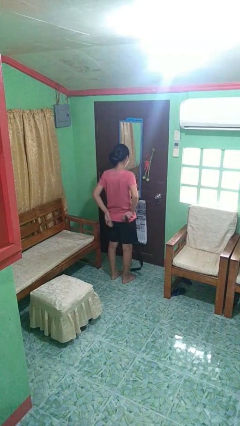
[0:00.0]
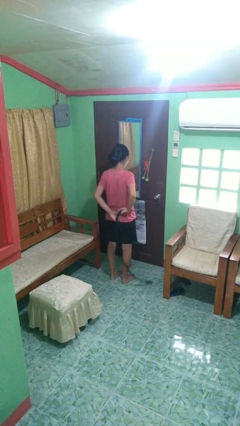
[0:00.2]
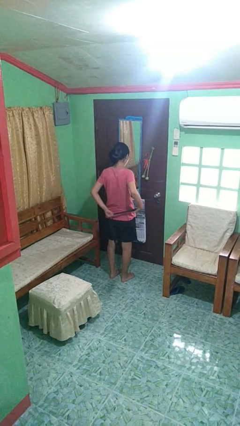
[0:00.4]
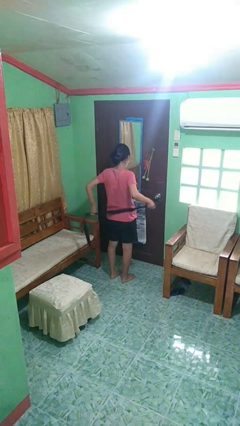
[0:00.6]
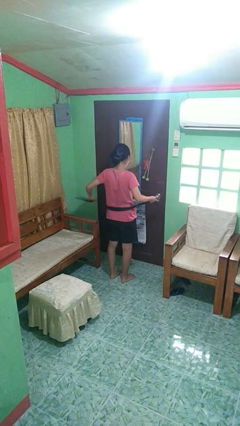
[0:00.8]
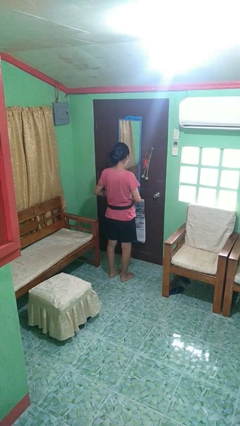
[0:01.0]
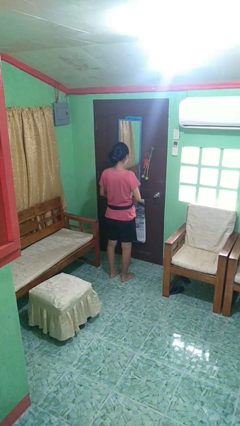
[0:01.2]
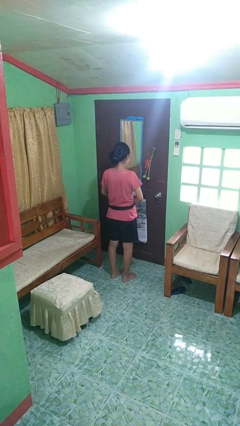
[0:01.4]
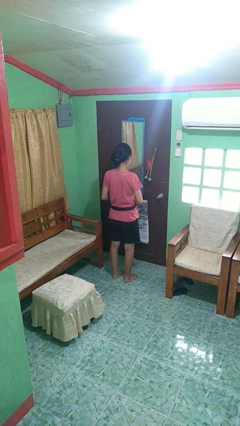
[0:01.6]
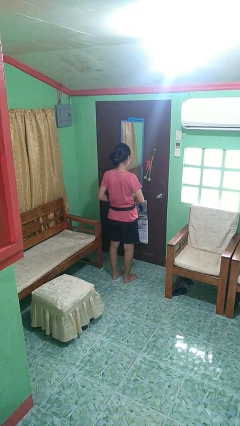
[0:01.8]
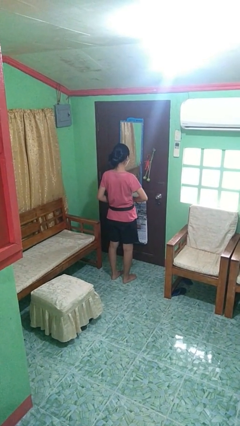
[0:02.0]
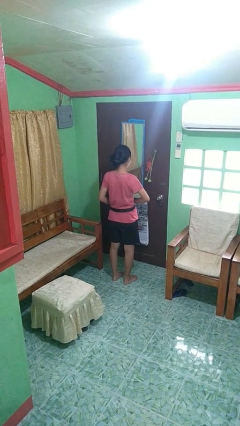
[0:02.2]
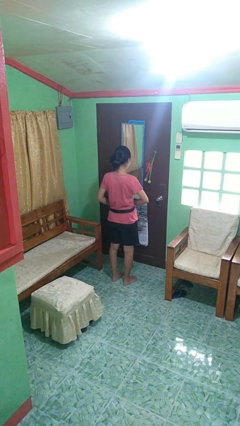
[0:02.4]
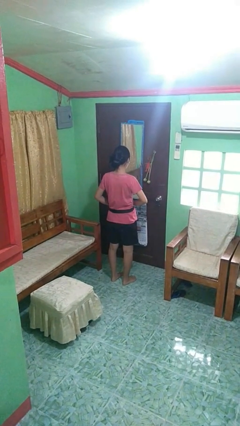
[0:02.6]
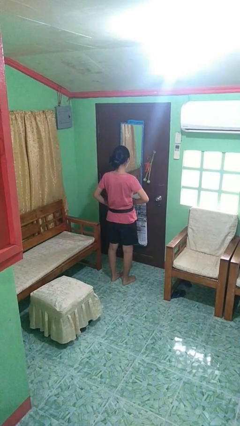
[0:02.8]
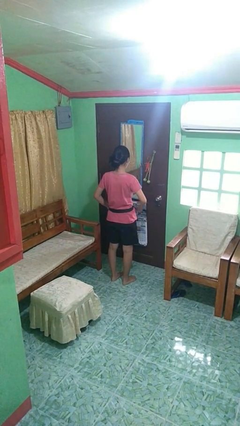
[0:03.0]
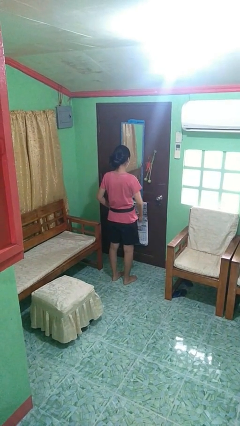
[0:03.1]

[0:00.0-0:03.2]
person puts on belt

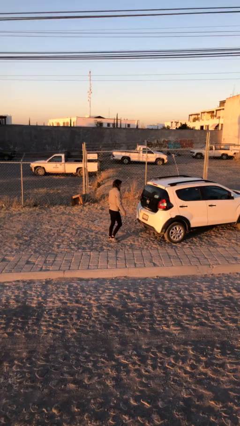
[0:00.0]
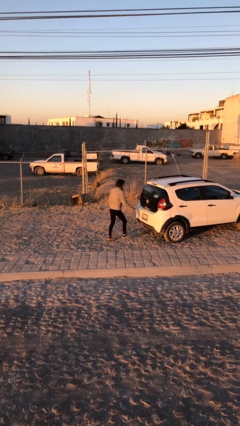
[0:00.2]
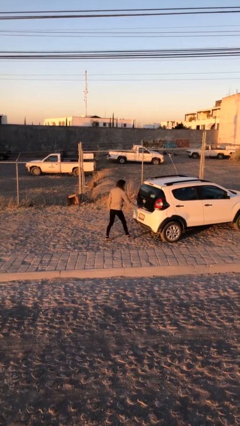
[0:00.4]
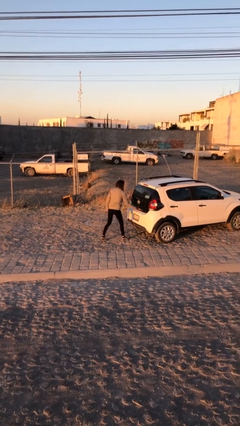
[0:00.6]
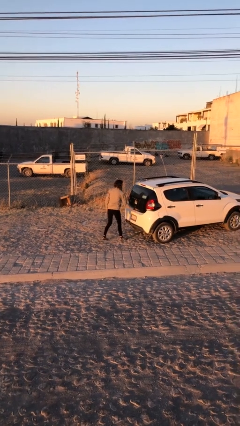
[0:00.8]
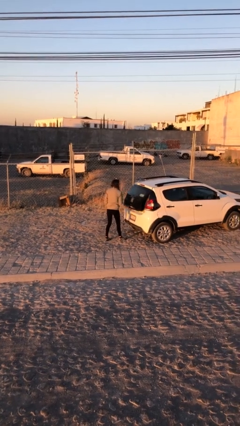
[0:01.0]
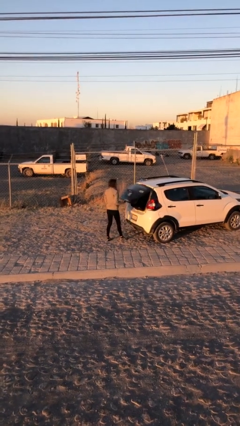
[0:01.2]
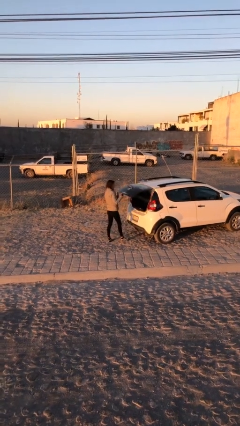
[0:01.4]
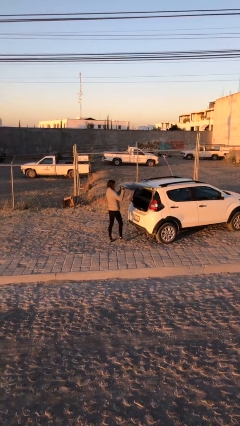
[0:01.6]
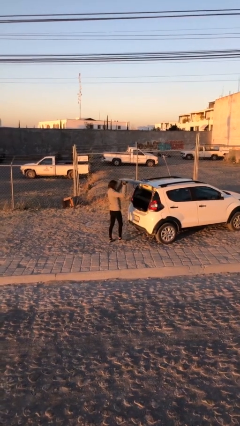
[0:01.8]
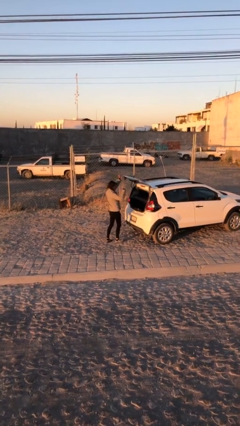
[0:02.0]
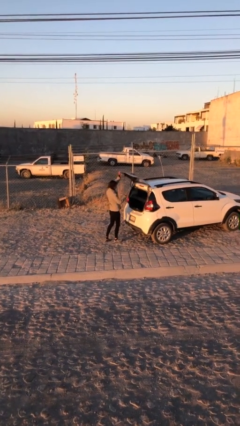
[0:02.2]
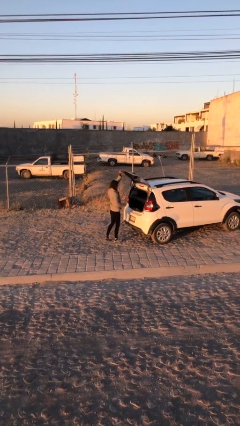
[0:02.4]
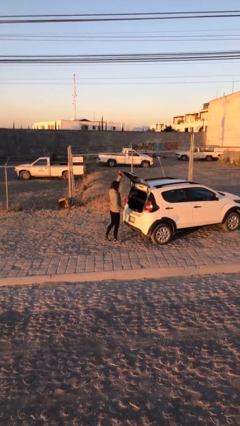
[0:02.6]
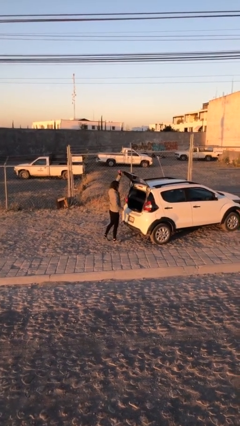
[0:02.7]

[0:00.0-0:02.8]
person opens car trunk

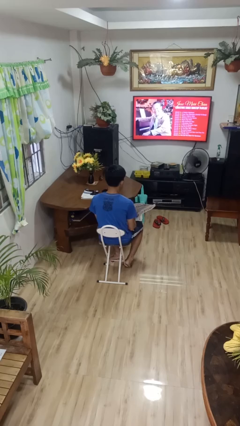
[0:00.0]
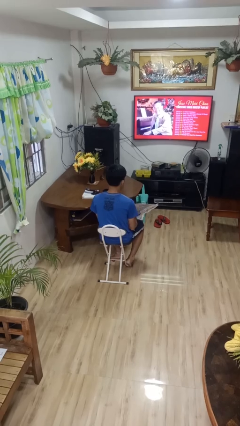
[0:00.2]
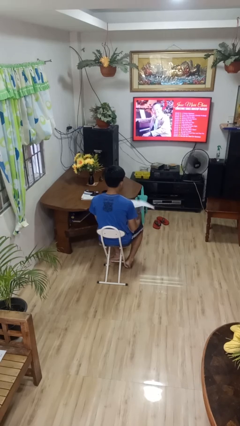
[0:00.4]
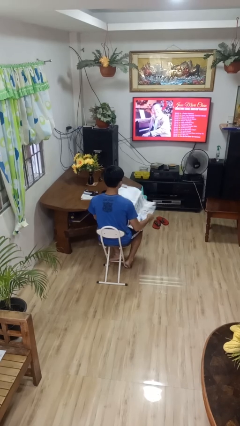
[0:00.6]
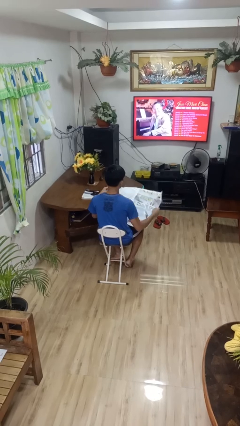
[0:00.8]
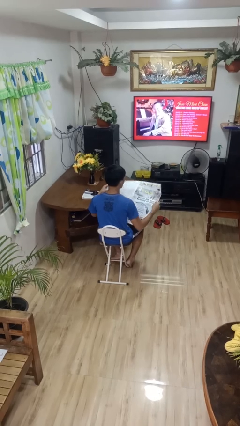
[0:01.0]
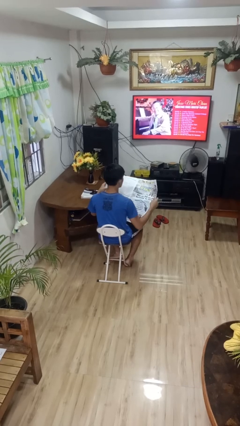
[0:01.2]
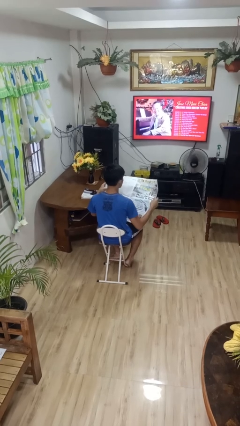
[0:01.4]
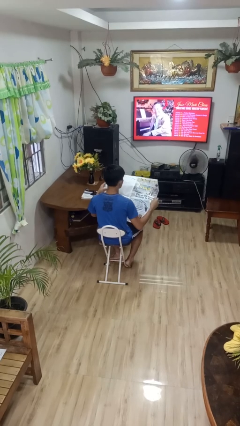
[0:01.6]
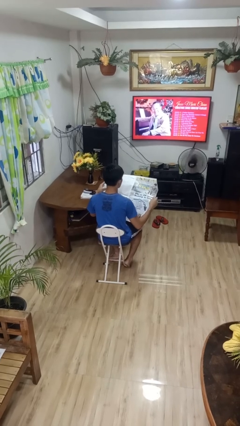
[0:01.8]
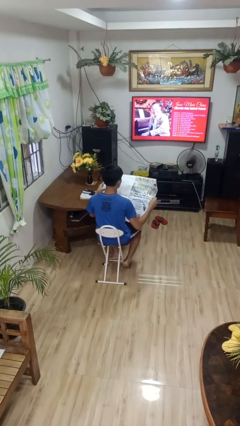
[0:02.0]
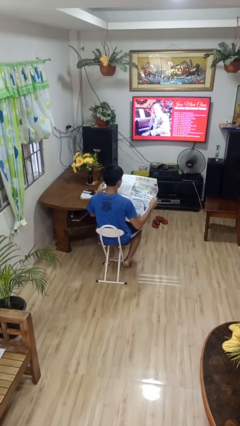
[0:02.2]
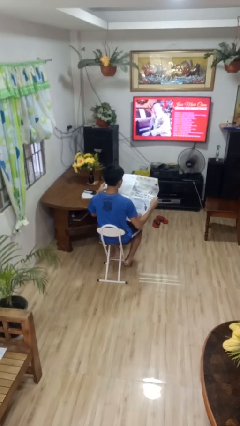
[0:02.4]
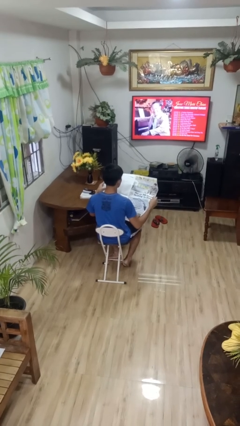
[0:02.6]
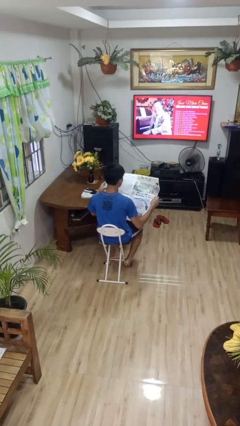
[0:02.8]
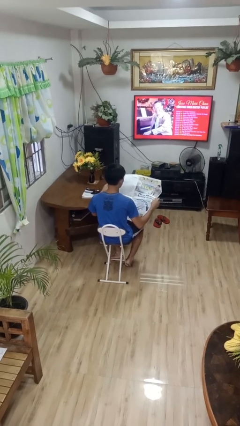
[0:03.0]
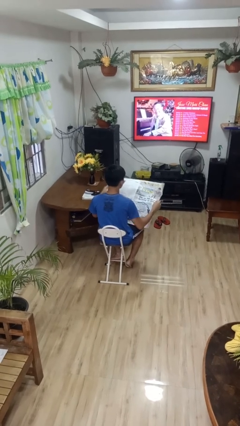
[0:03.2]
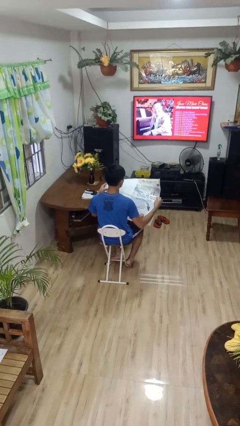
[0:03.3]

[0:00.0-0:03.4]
person reads newspaper

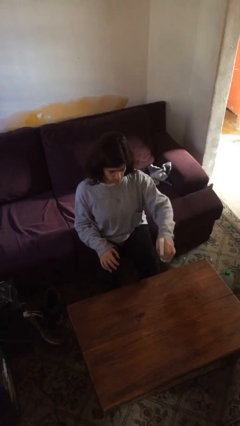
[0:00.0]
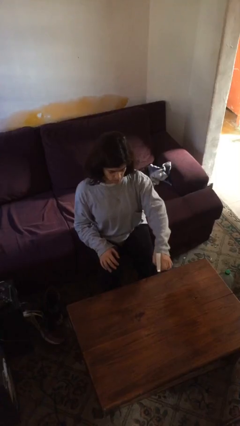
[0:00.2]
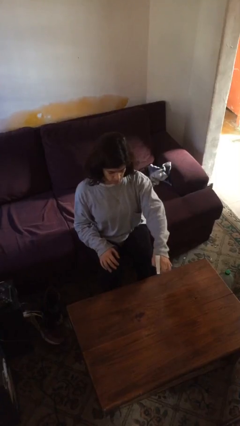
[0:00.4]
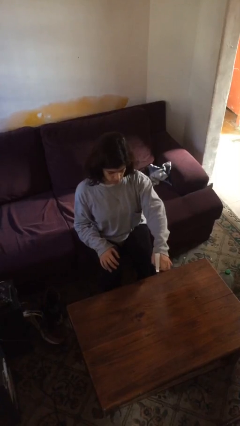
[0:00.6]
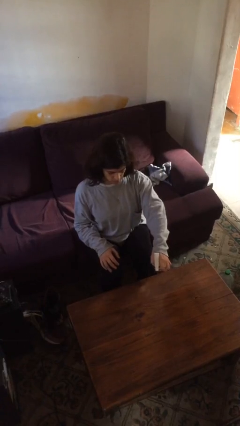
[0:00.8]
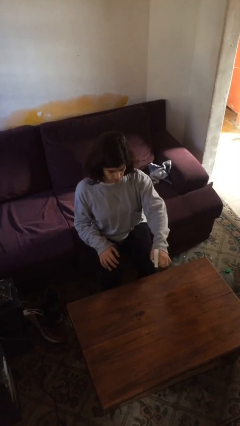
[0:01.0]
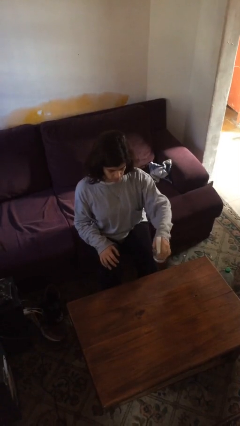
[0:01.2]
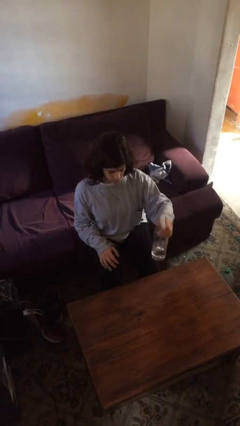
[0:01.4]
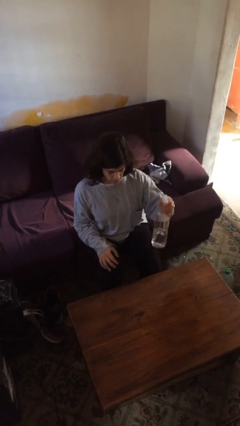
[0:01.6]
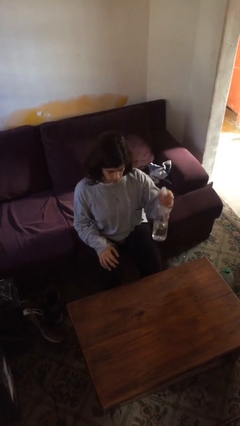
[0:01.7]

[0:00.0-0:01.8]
person sprays from bottle

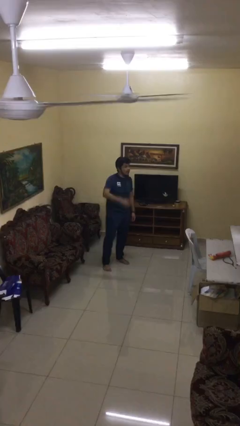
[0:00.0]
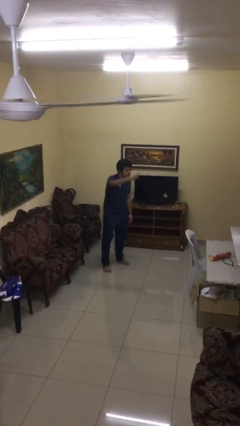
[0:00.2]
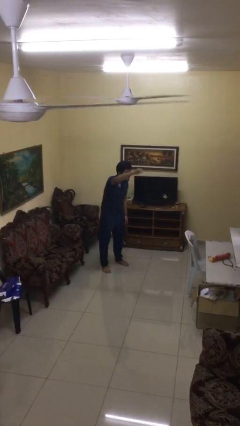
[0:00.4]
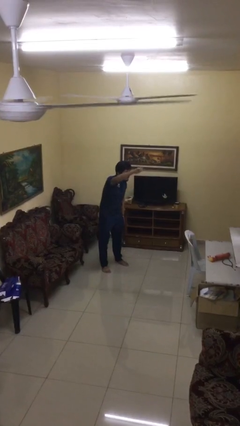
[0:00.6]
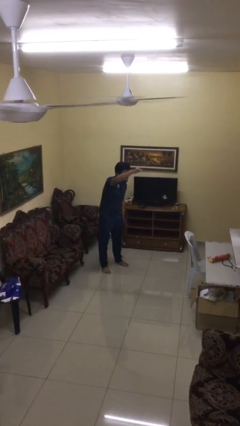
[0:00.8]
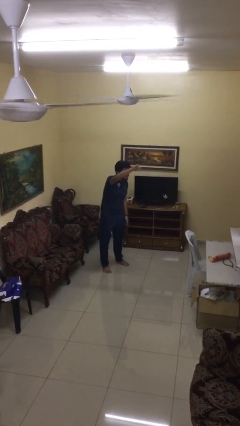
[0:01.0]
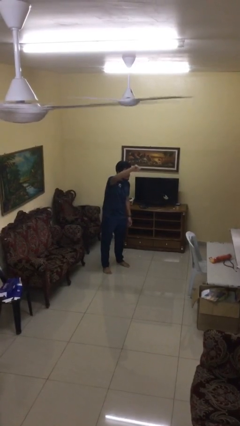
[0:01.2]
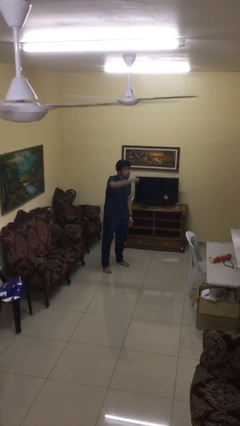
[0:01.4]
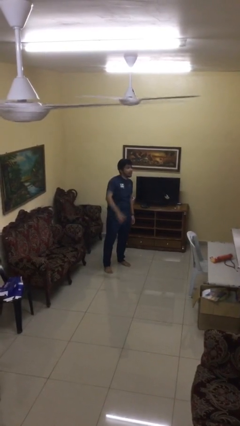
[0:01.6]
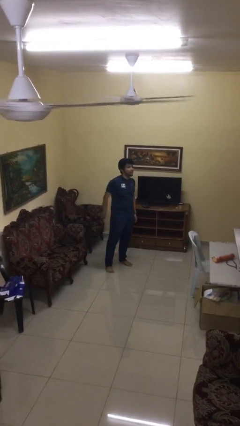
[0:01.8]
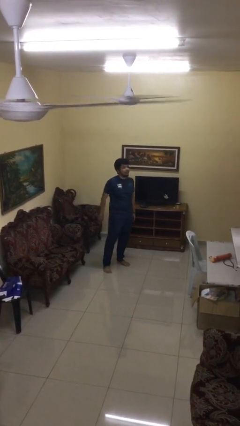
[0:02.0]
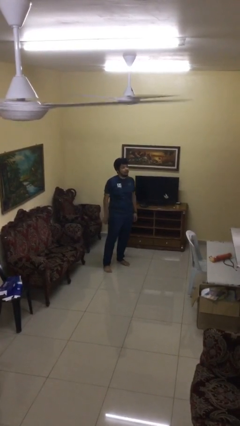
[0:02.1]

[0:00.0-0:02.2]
person gestures come here

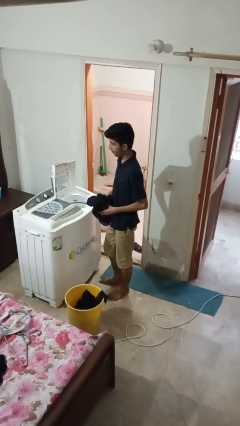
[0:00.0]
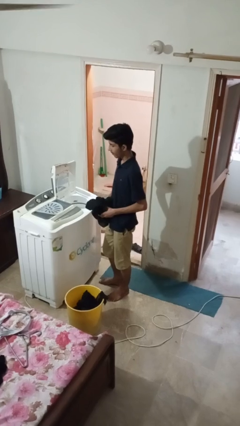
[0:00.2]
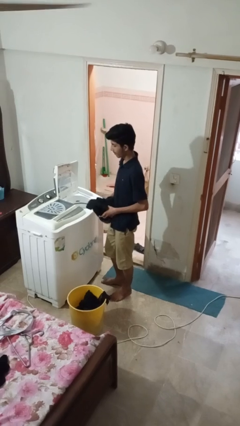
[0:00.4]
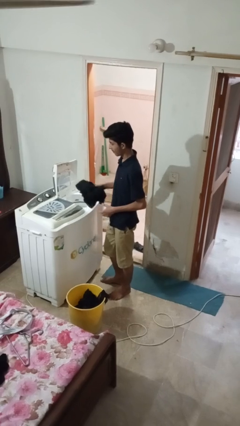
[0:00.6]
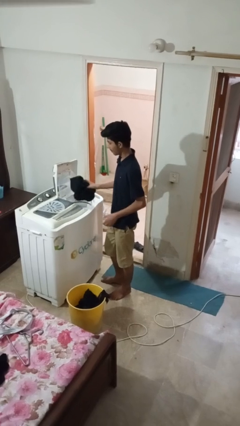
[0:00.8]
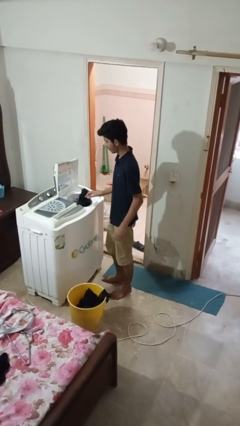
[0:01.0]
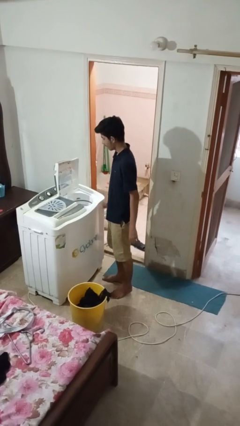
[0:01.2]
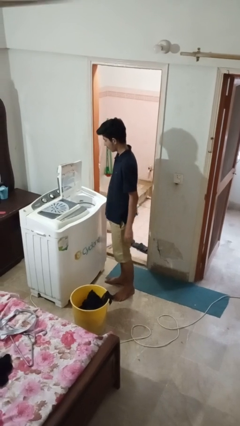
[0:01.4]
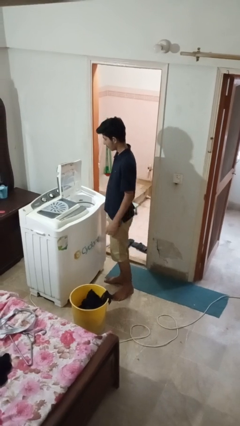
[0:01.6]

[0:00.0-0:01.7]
person loads dryer

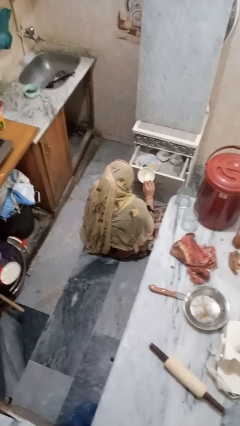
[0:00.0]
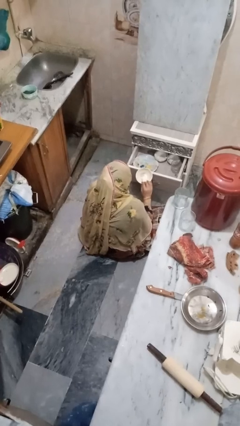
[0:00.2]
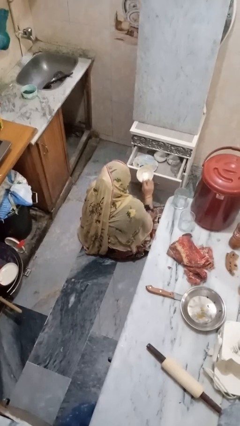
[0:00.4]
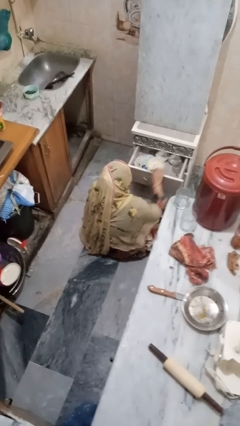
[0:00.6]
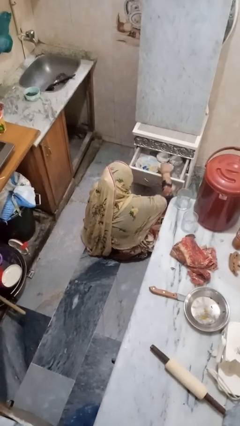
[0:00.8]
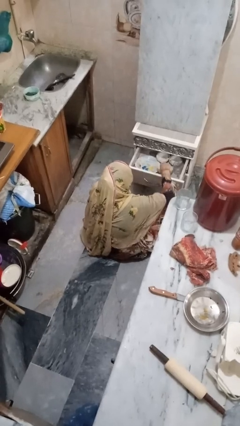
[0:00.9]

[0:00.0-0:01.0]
person puts object into kitchen drawer

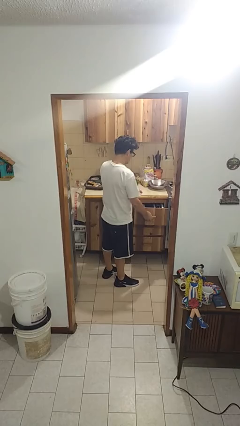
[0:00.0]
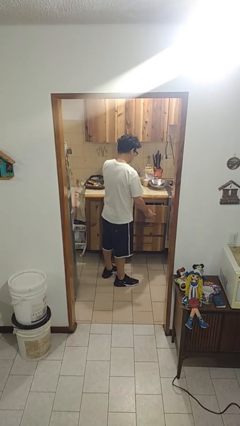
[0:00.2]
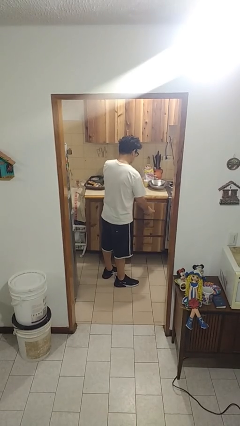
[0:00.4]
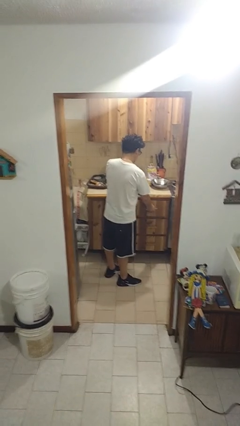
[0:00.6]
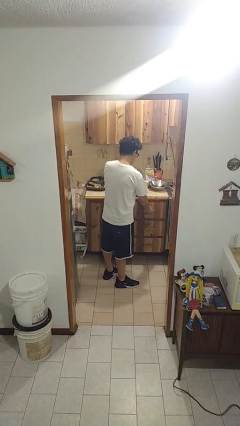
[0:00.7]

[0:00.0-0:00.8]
person closes kitchen drawer
